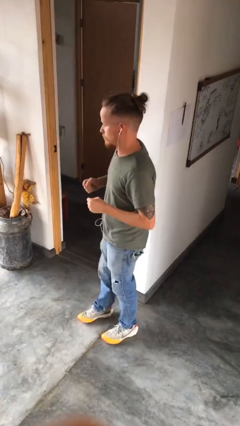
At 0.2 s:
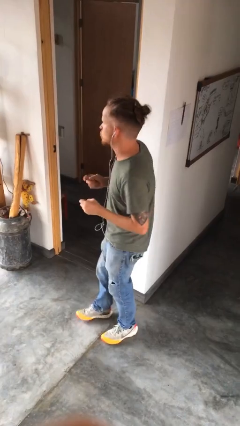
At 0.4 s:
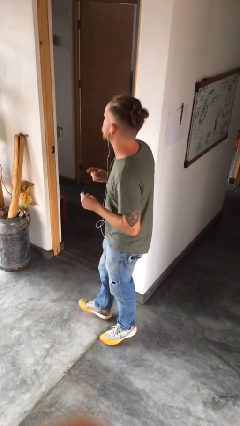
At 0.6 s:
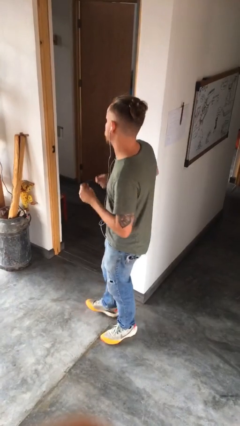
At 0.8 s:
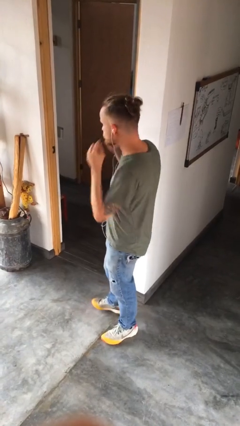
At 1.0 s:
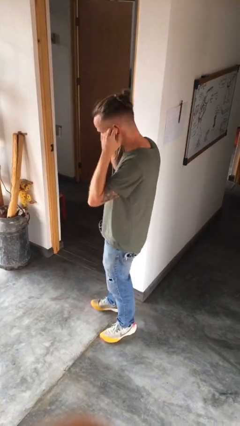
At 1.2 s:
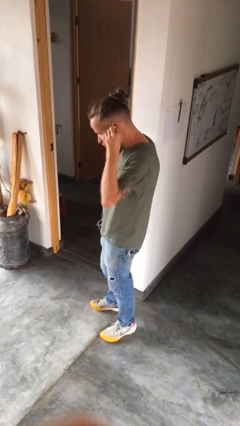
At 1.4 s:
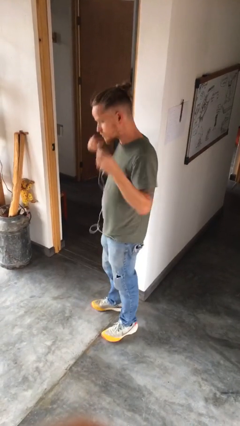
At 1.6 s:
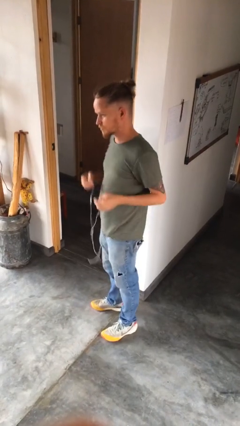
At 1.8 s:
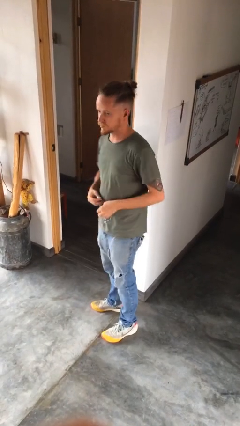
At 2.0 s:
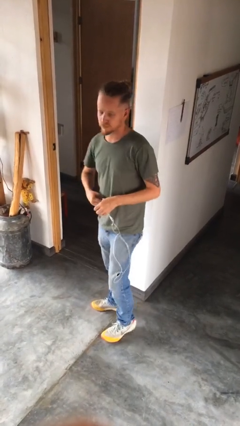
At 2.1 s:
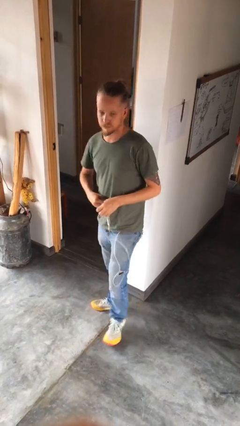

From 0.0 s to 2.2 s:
person takes off headphones

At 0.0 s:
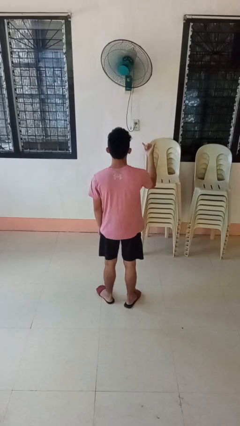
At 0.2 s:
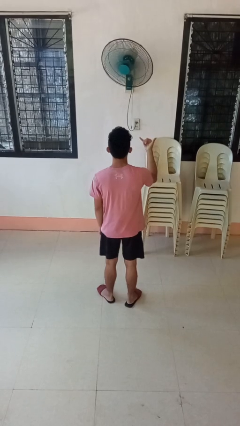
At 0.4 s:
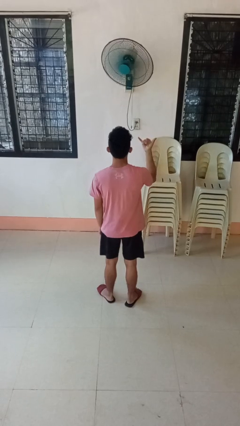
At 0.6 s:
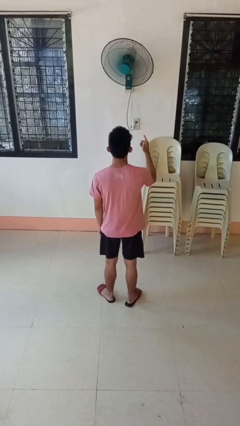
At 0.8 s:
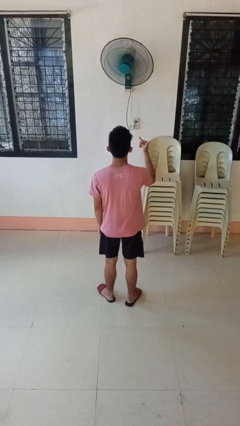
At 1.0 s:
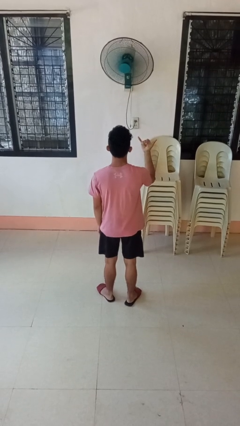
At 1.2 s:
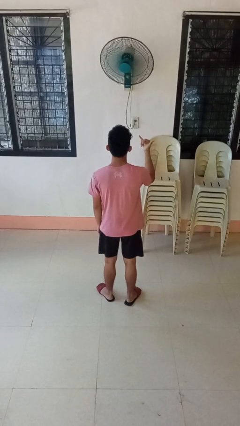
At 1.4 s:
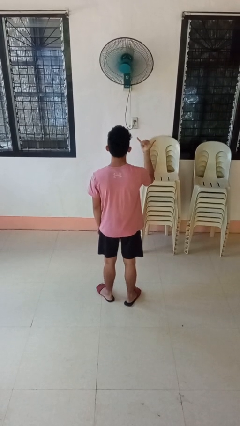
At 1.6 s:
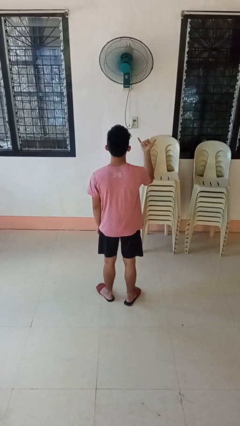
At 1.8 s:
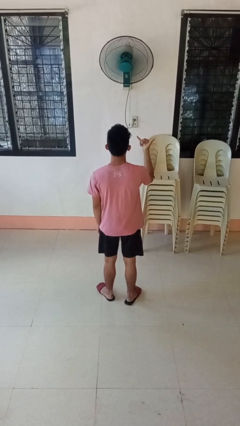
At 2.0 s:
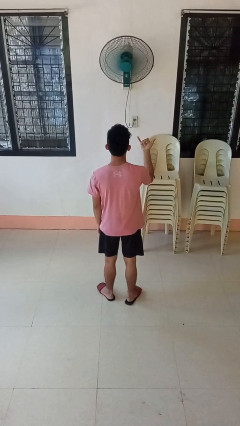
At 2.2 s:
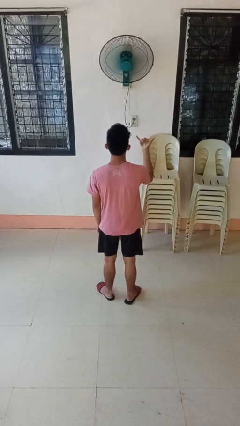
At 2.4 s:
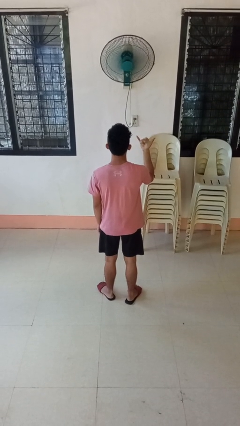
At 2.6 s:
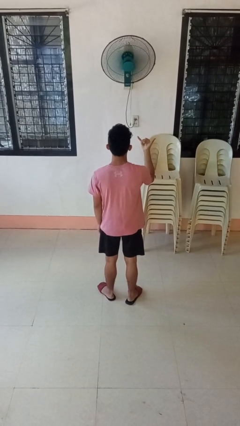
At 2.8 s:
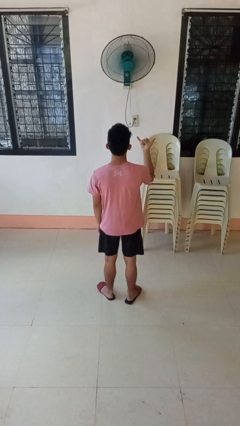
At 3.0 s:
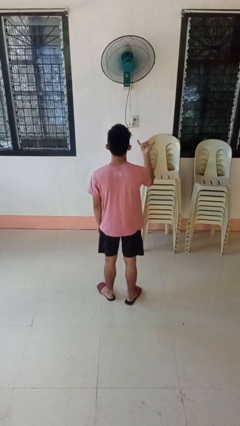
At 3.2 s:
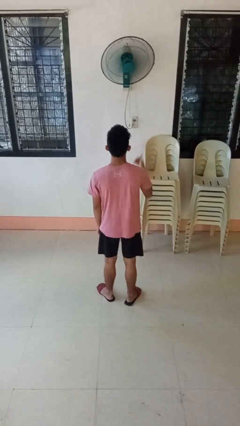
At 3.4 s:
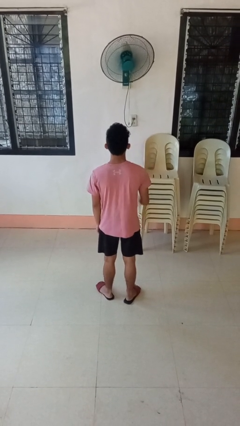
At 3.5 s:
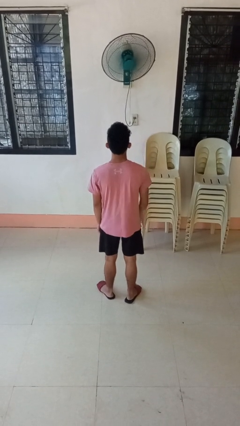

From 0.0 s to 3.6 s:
person gestures hang loose

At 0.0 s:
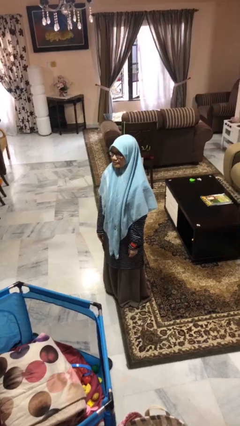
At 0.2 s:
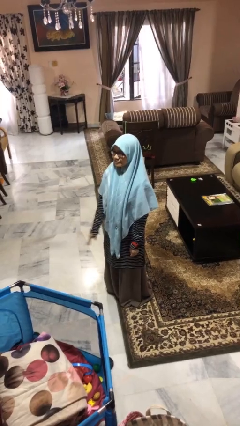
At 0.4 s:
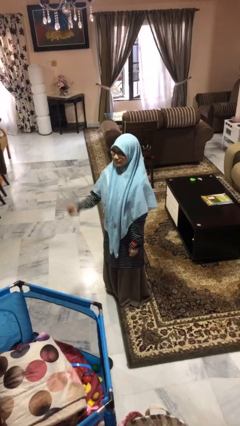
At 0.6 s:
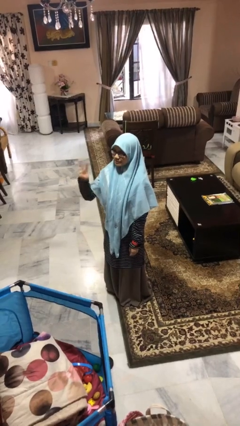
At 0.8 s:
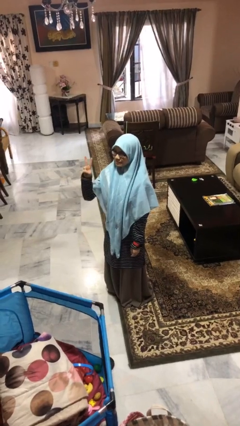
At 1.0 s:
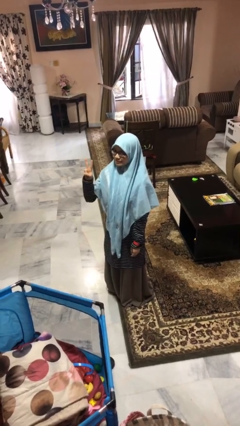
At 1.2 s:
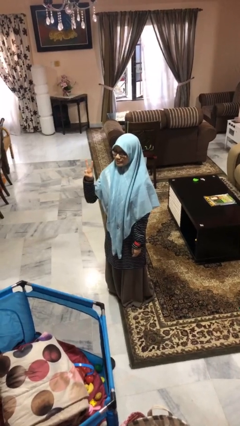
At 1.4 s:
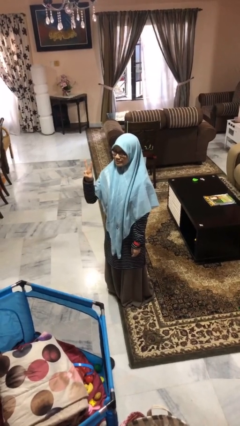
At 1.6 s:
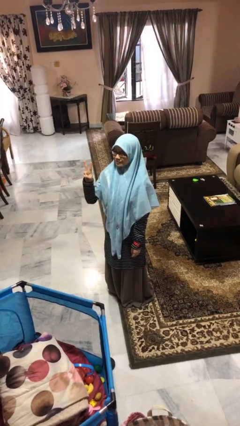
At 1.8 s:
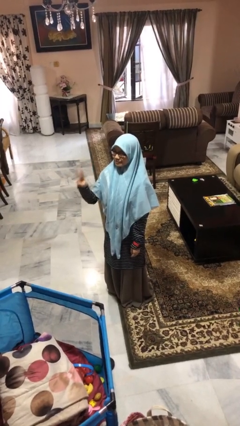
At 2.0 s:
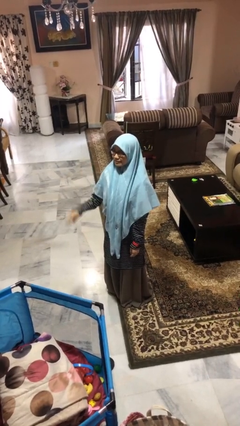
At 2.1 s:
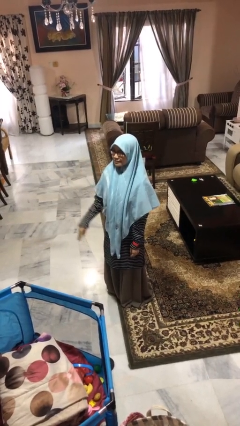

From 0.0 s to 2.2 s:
person gestures peace

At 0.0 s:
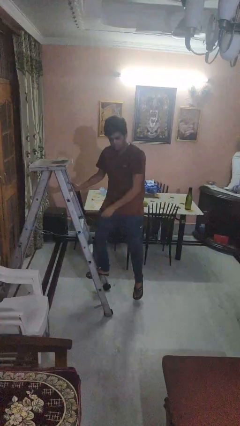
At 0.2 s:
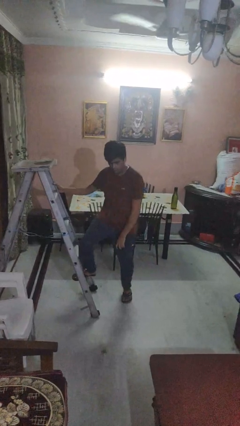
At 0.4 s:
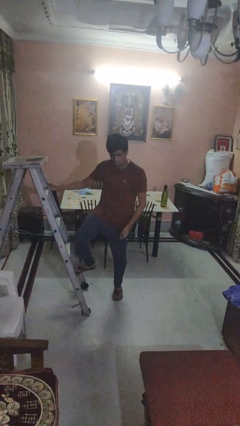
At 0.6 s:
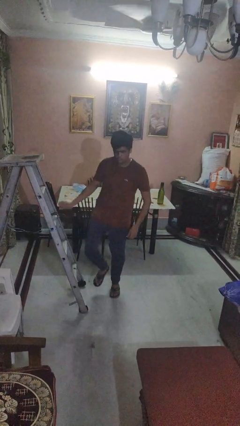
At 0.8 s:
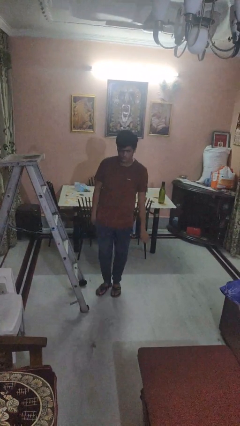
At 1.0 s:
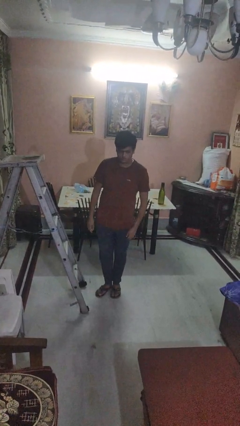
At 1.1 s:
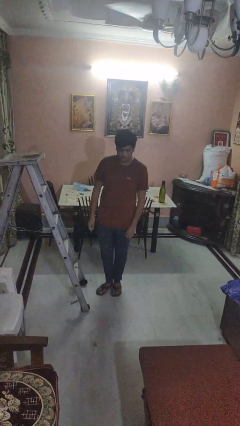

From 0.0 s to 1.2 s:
person climbs down ladder

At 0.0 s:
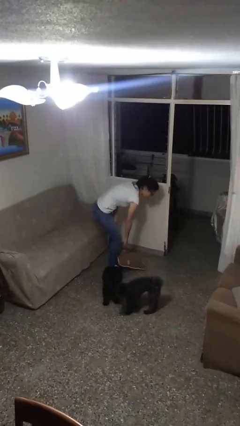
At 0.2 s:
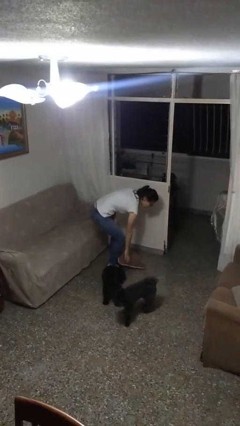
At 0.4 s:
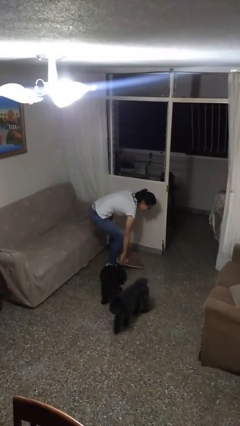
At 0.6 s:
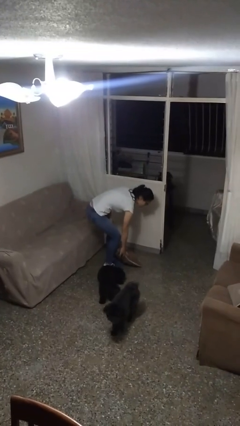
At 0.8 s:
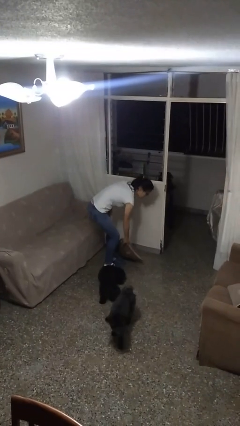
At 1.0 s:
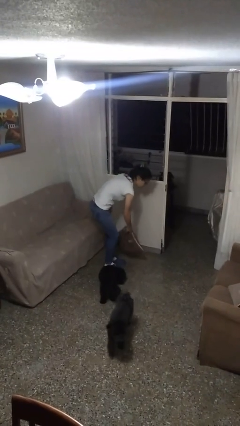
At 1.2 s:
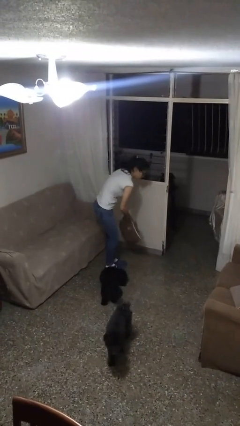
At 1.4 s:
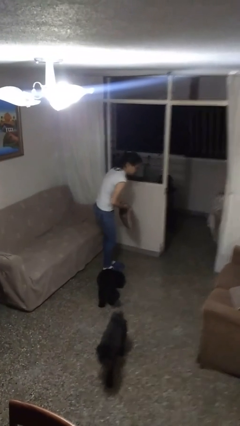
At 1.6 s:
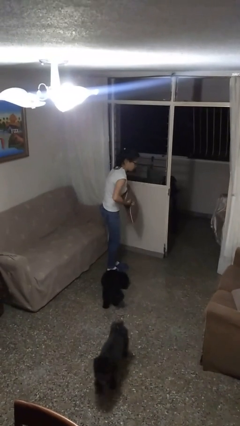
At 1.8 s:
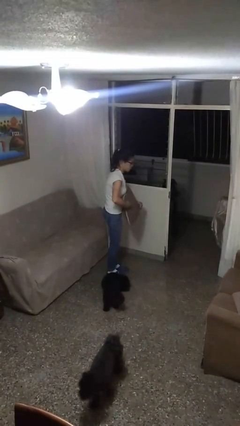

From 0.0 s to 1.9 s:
person picks up object from floor

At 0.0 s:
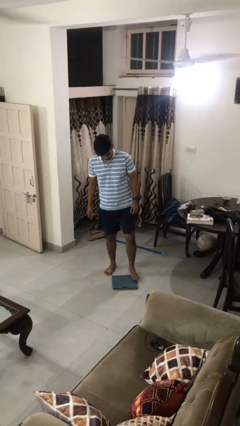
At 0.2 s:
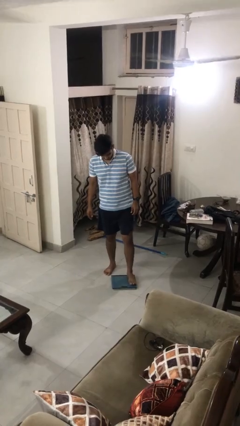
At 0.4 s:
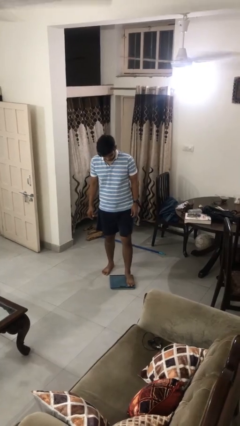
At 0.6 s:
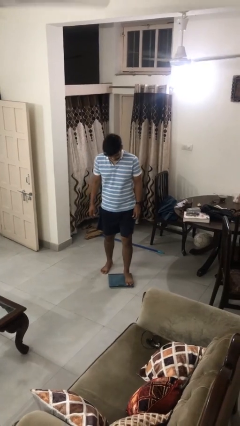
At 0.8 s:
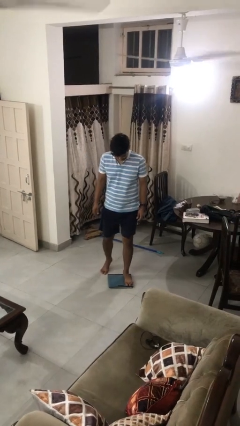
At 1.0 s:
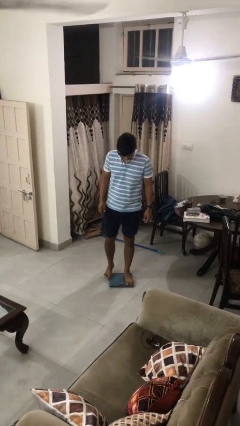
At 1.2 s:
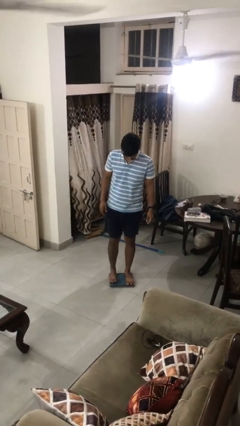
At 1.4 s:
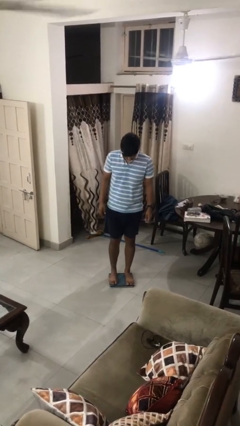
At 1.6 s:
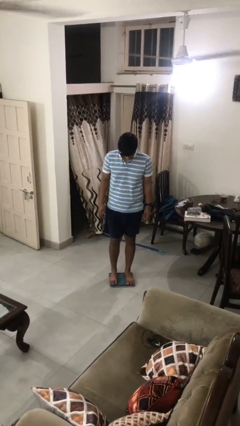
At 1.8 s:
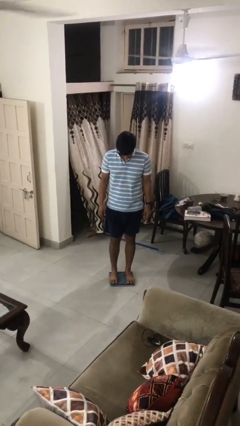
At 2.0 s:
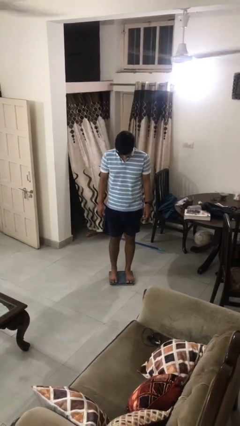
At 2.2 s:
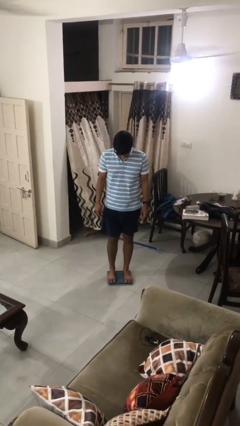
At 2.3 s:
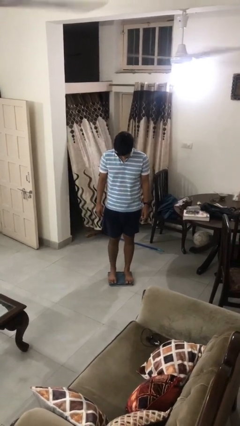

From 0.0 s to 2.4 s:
person uses bodyweight scale

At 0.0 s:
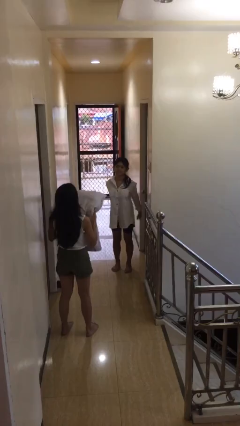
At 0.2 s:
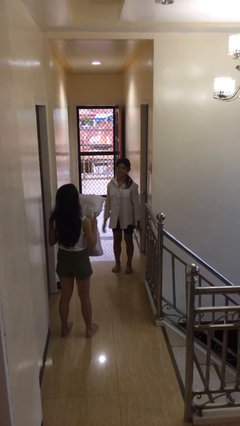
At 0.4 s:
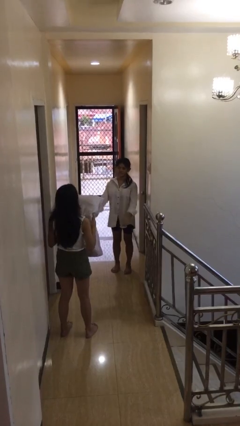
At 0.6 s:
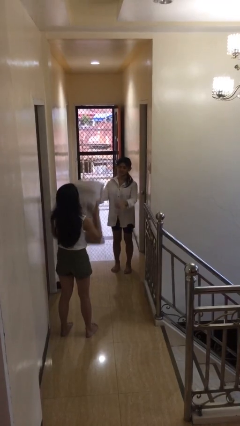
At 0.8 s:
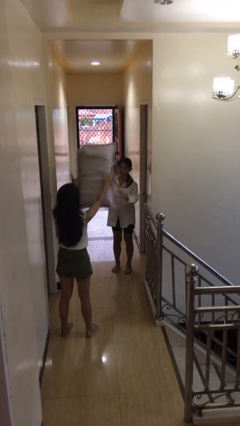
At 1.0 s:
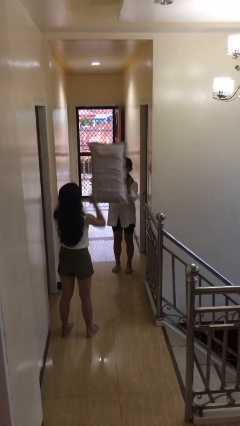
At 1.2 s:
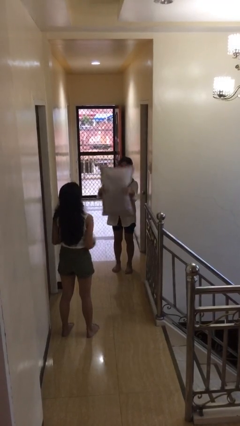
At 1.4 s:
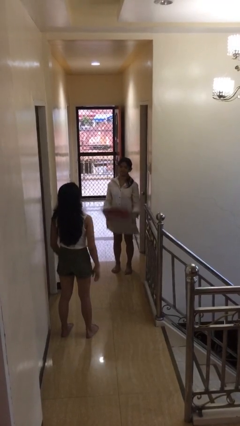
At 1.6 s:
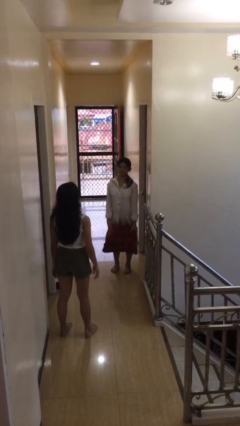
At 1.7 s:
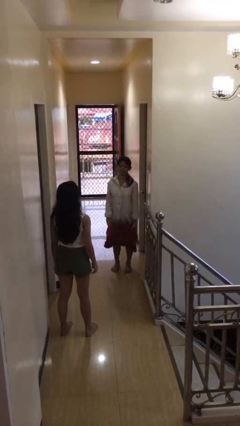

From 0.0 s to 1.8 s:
person catches object from person

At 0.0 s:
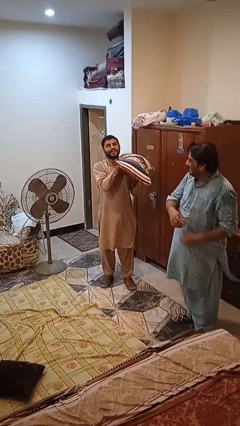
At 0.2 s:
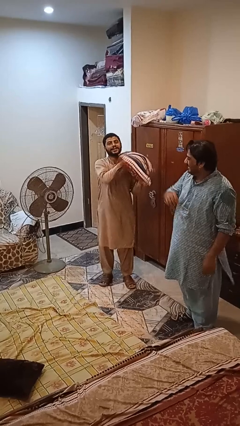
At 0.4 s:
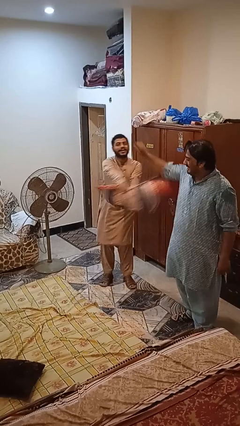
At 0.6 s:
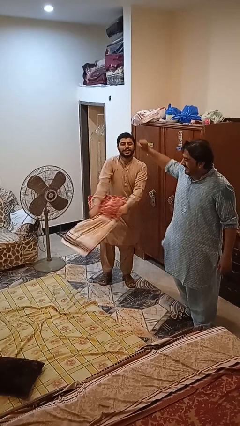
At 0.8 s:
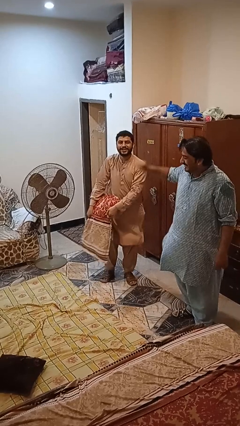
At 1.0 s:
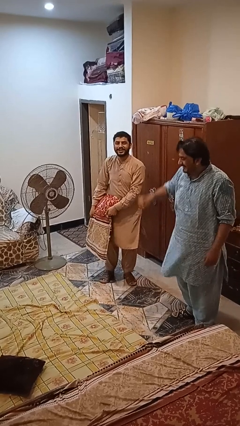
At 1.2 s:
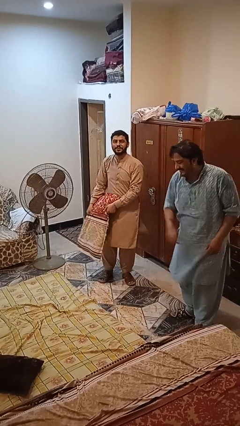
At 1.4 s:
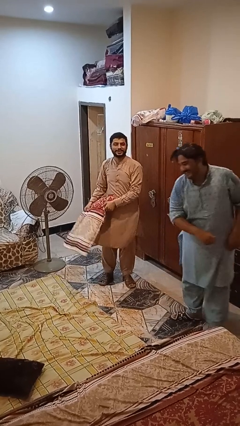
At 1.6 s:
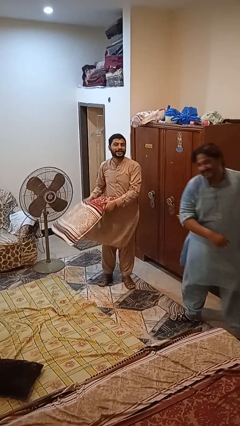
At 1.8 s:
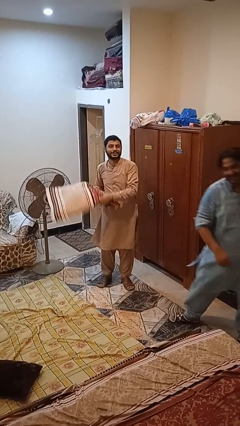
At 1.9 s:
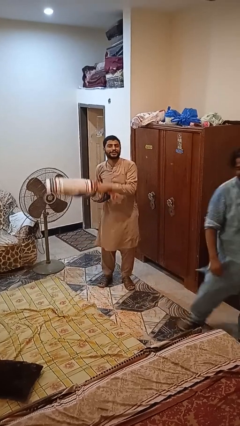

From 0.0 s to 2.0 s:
person hits person with pillow

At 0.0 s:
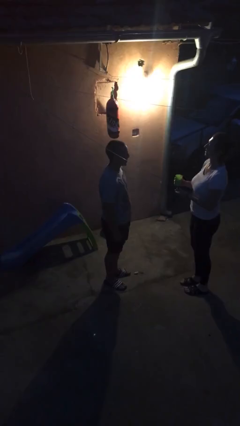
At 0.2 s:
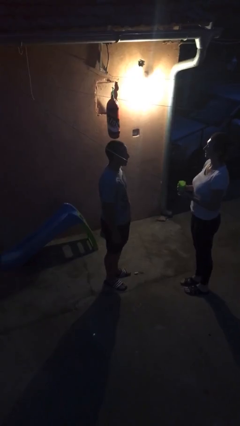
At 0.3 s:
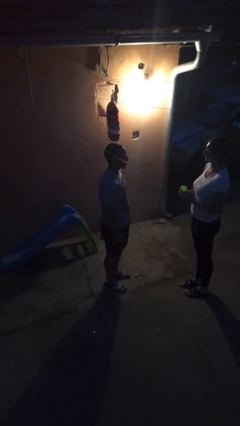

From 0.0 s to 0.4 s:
person transfers object to person
